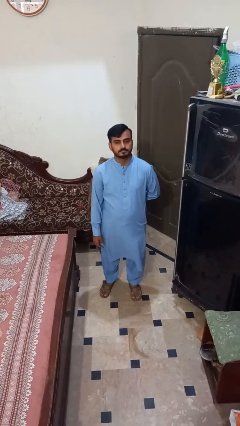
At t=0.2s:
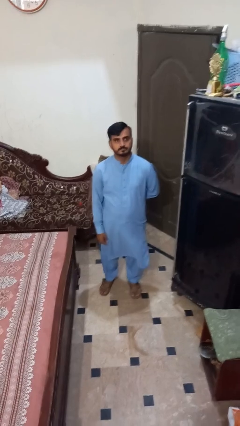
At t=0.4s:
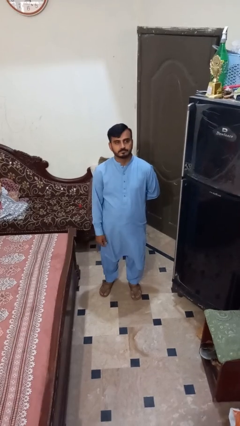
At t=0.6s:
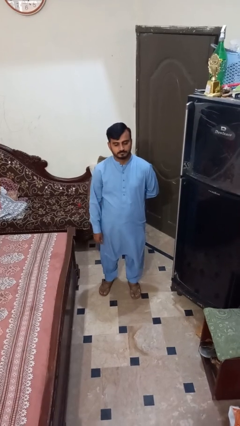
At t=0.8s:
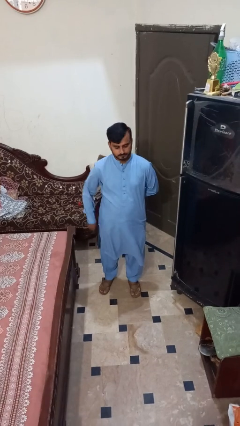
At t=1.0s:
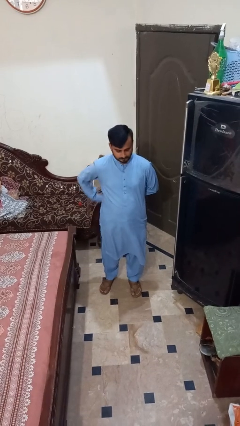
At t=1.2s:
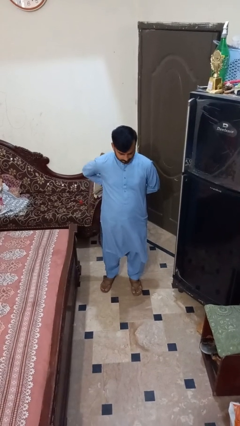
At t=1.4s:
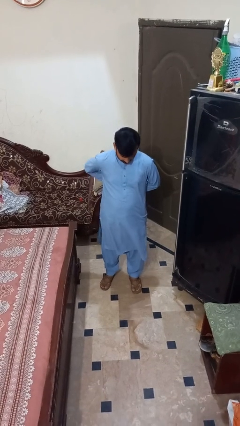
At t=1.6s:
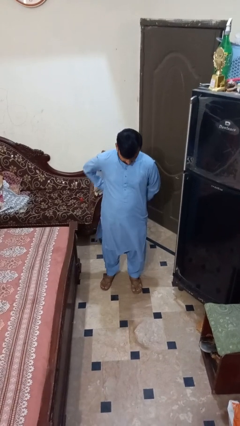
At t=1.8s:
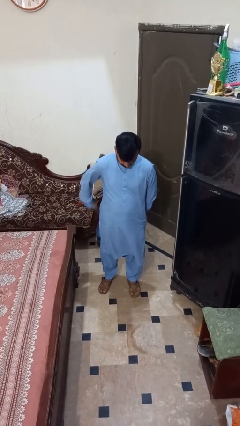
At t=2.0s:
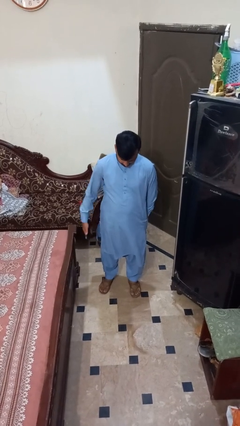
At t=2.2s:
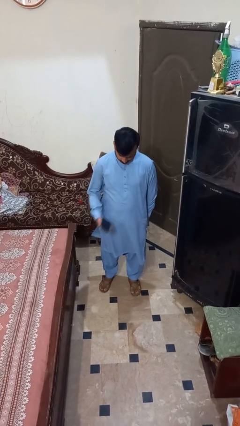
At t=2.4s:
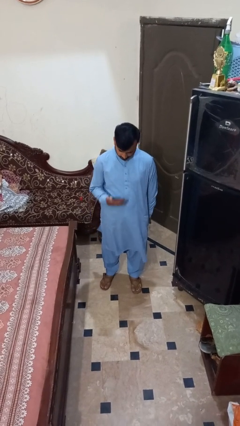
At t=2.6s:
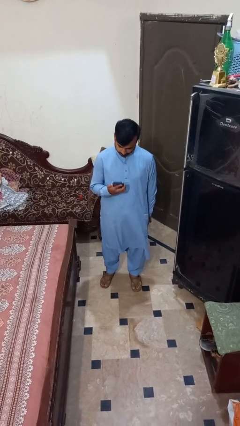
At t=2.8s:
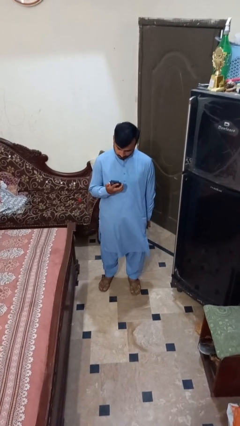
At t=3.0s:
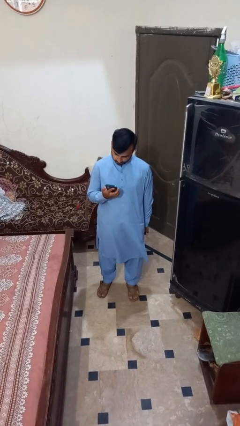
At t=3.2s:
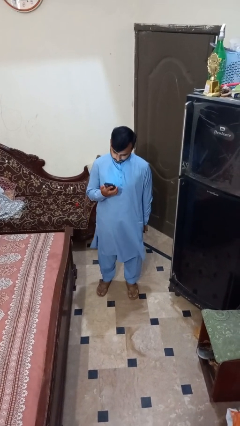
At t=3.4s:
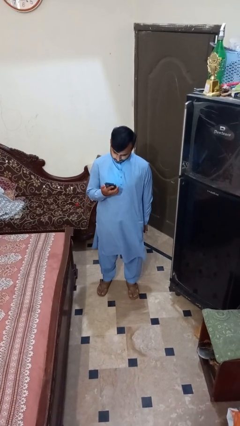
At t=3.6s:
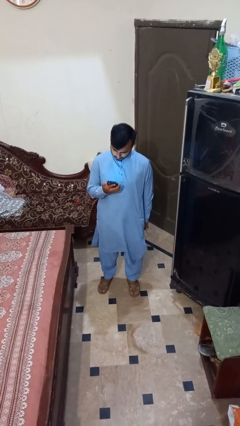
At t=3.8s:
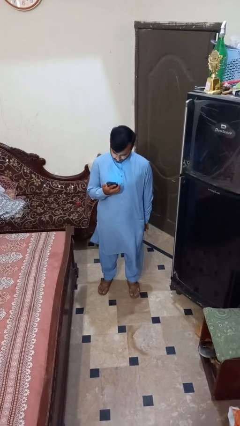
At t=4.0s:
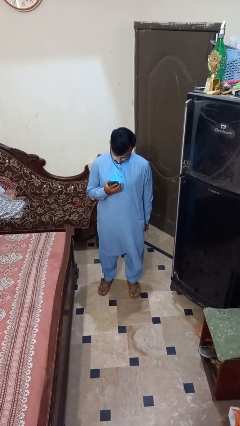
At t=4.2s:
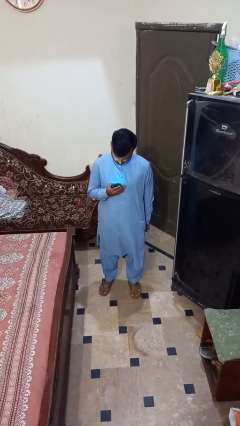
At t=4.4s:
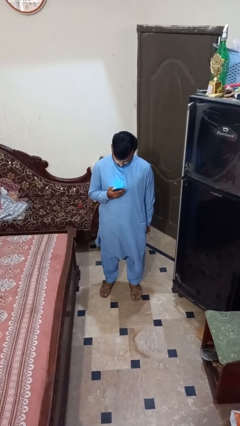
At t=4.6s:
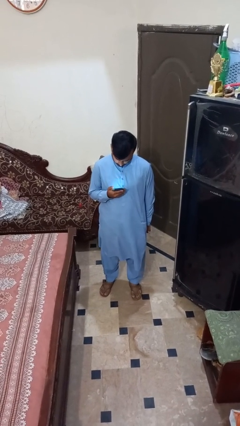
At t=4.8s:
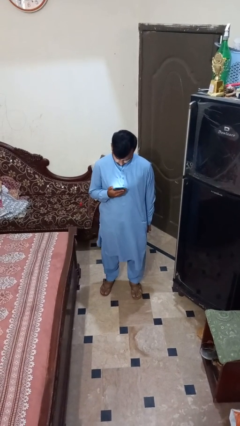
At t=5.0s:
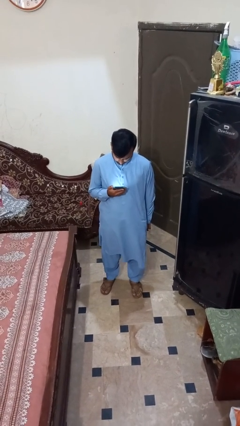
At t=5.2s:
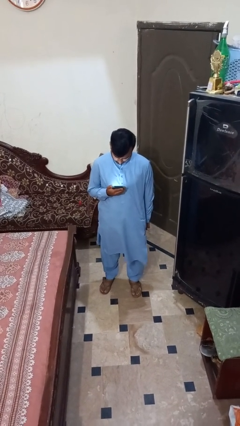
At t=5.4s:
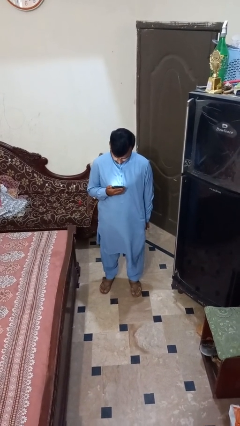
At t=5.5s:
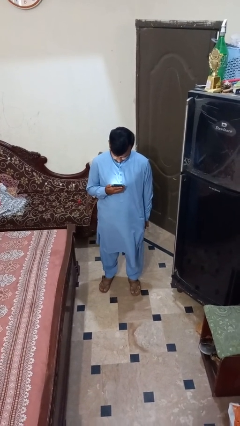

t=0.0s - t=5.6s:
person takes phone from pocket

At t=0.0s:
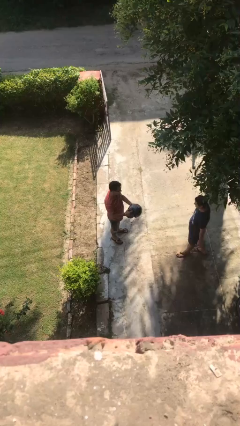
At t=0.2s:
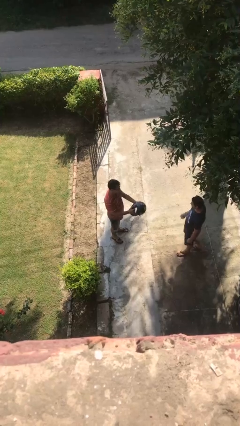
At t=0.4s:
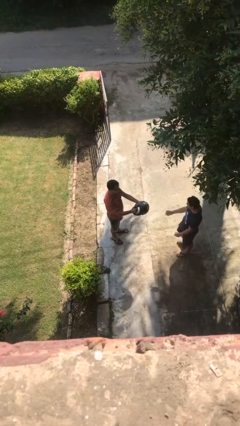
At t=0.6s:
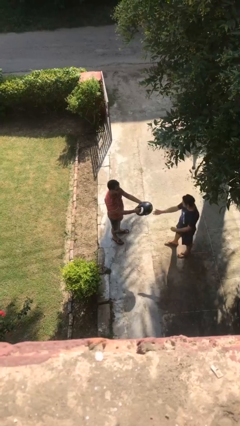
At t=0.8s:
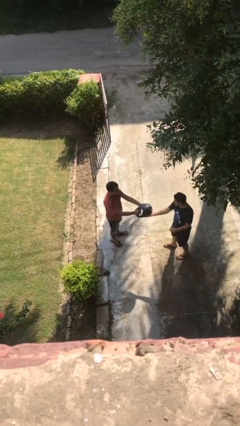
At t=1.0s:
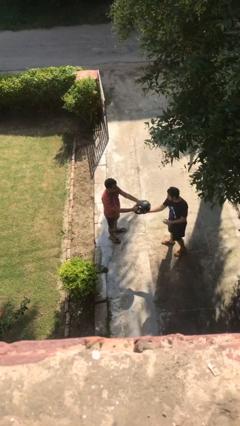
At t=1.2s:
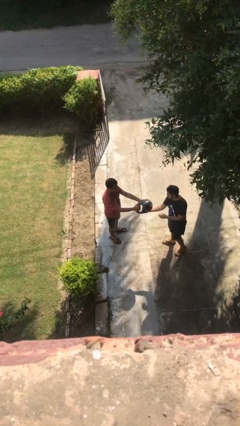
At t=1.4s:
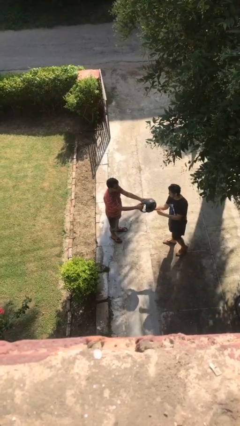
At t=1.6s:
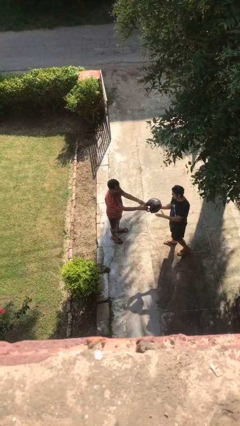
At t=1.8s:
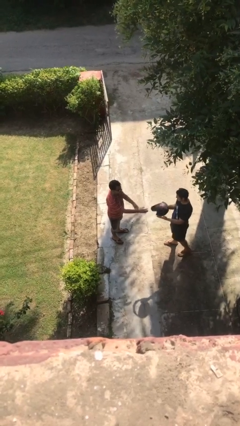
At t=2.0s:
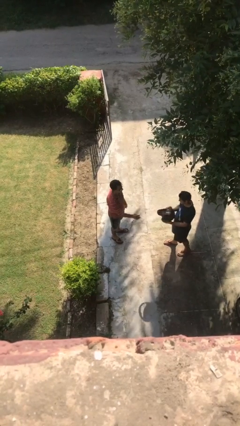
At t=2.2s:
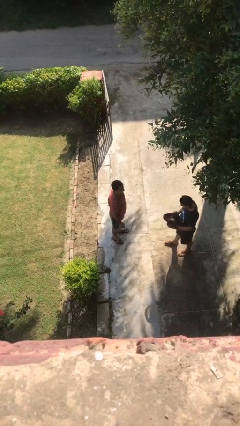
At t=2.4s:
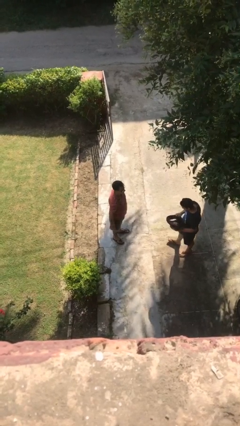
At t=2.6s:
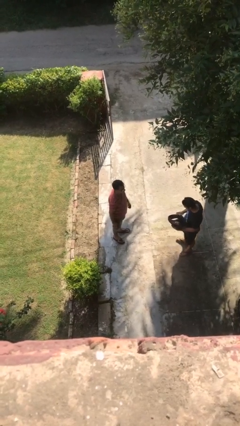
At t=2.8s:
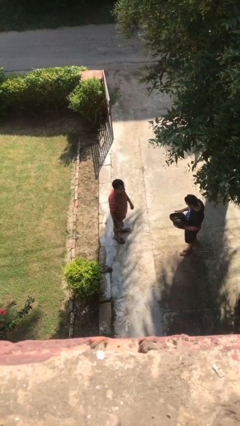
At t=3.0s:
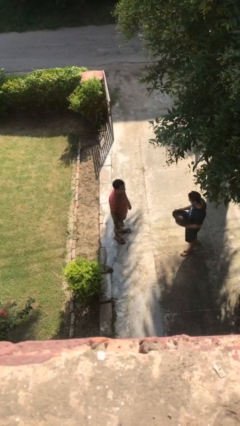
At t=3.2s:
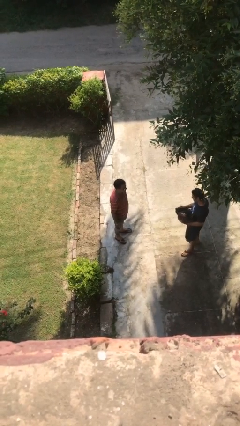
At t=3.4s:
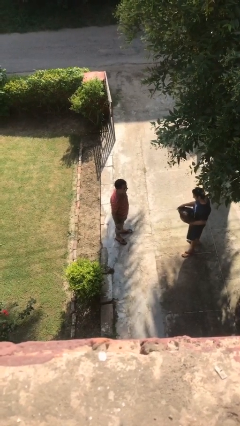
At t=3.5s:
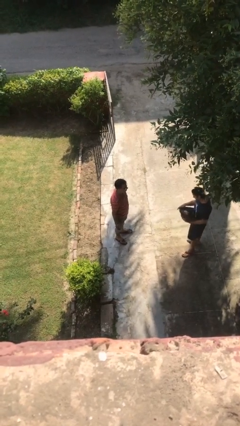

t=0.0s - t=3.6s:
person transfers object to person

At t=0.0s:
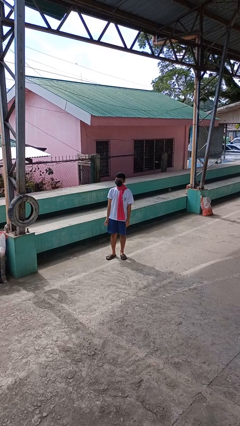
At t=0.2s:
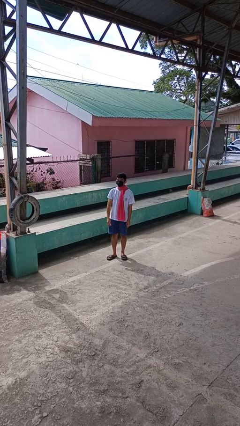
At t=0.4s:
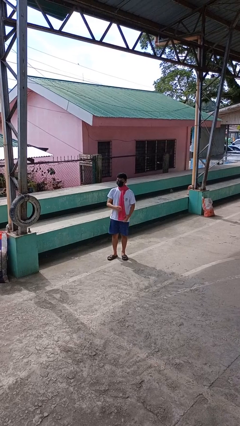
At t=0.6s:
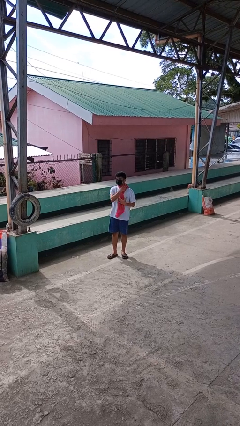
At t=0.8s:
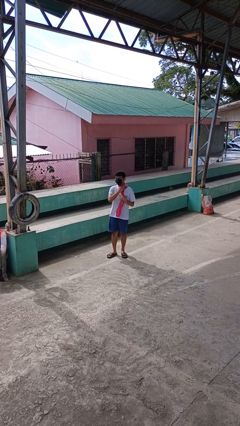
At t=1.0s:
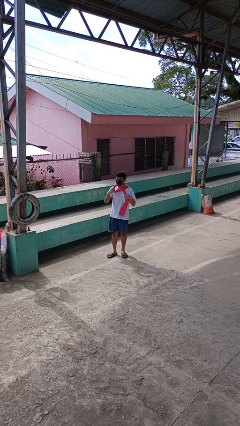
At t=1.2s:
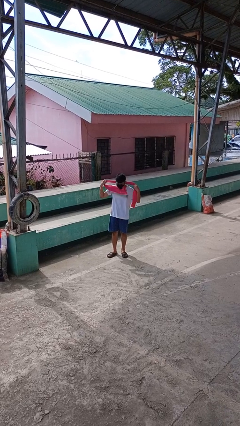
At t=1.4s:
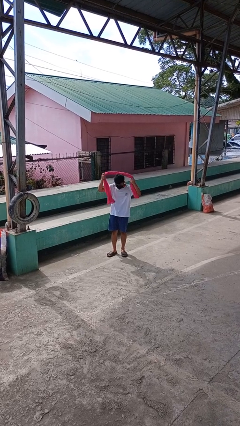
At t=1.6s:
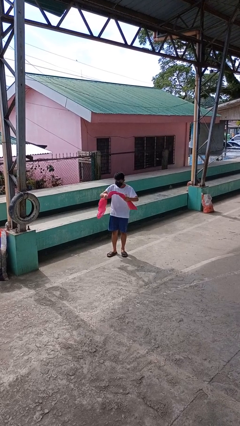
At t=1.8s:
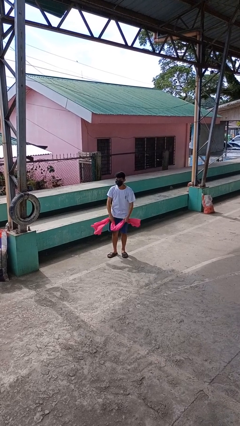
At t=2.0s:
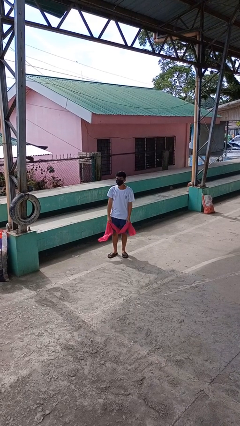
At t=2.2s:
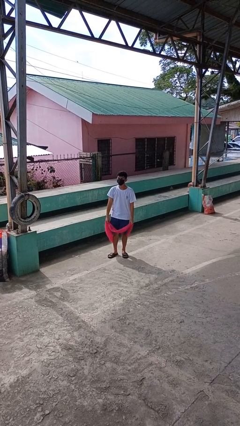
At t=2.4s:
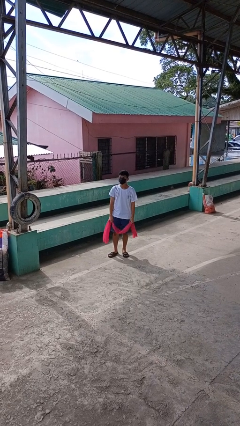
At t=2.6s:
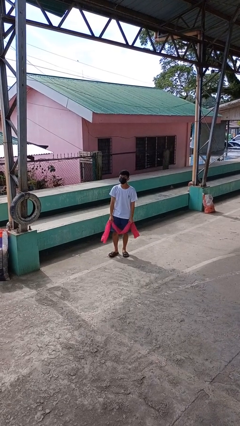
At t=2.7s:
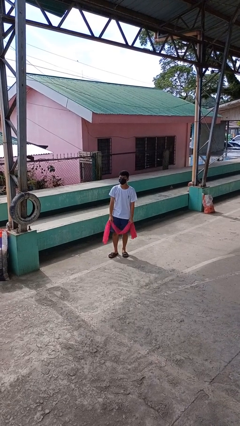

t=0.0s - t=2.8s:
person takes off scarf

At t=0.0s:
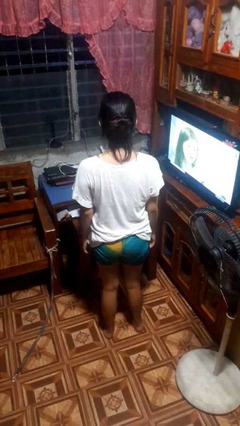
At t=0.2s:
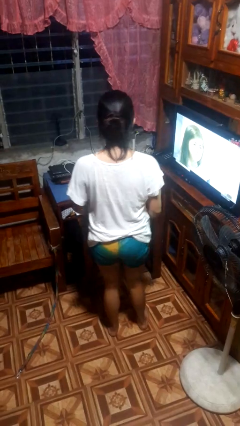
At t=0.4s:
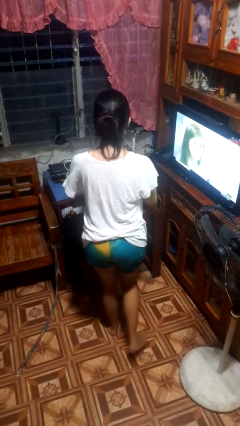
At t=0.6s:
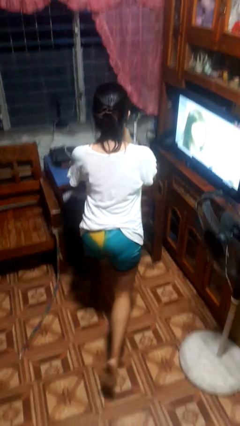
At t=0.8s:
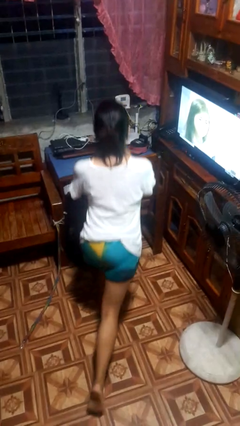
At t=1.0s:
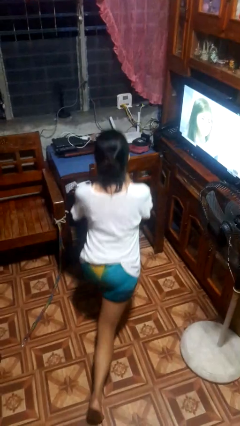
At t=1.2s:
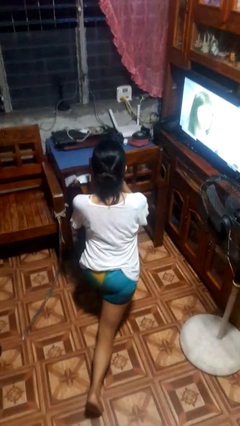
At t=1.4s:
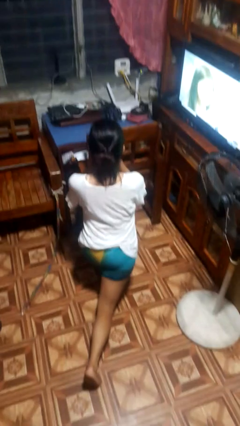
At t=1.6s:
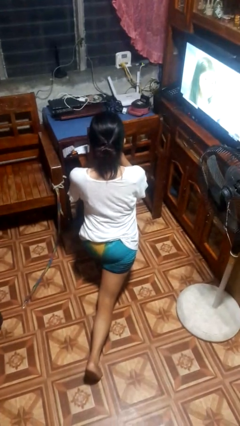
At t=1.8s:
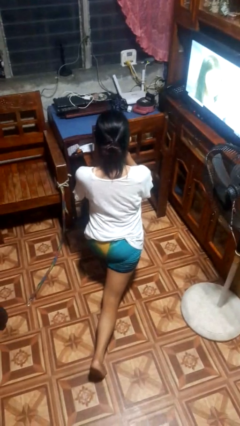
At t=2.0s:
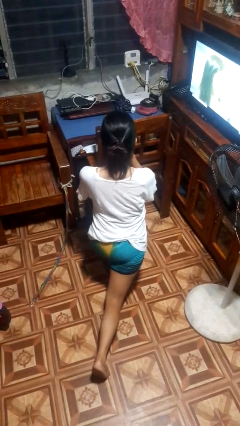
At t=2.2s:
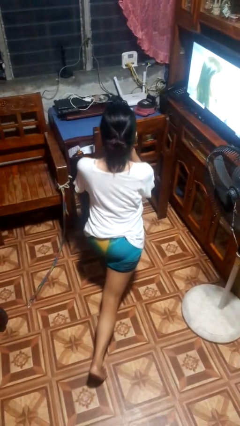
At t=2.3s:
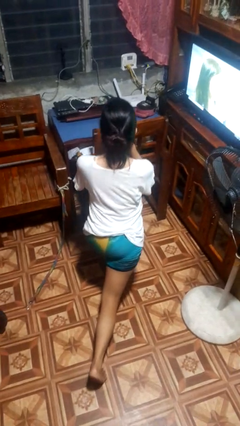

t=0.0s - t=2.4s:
person exercises with lunges

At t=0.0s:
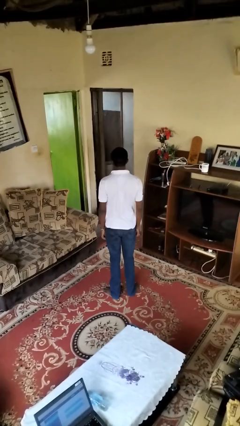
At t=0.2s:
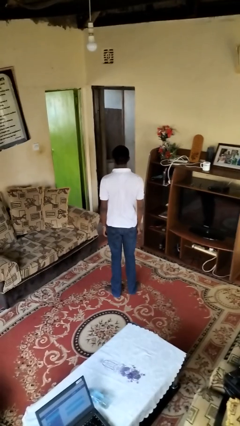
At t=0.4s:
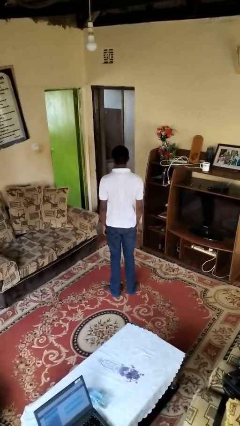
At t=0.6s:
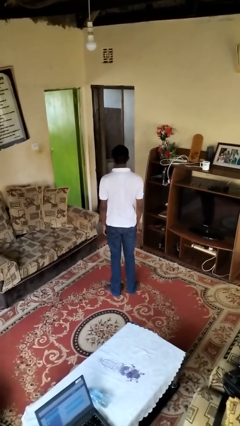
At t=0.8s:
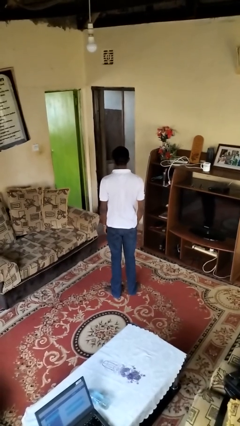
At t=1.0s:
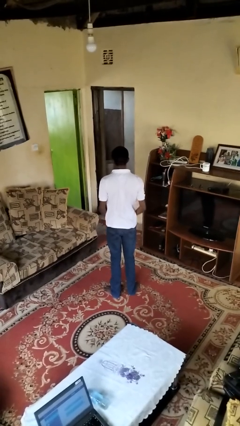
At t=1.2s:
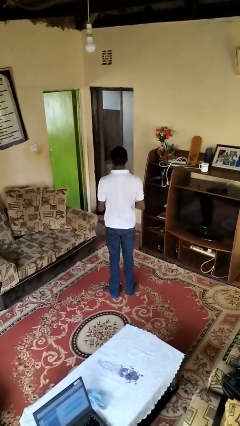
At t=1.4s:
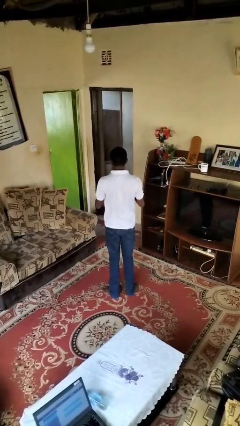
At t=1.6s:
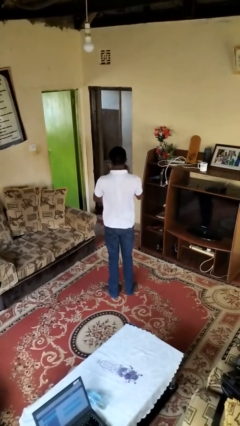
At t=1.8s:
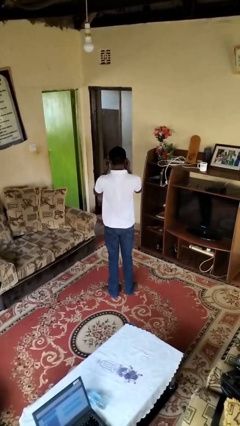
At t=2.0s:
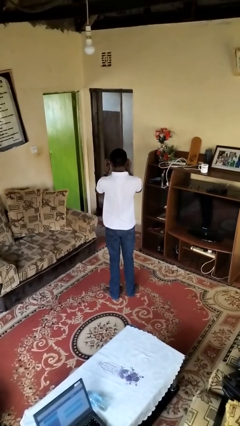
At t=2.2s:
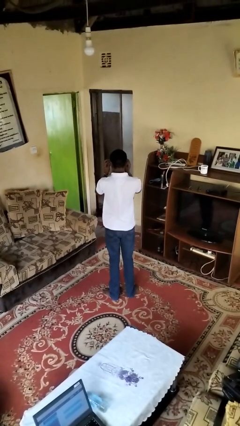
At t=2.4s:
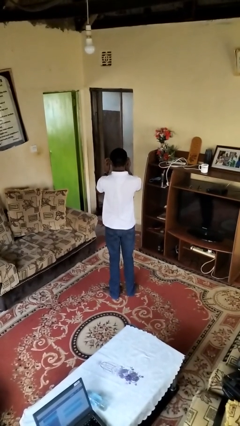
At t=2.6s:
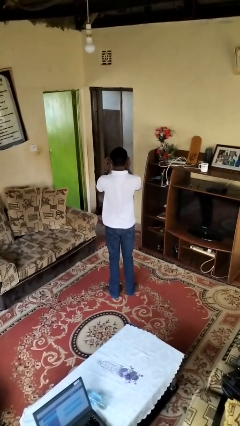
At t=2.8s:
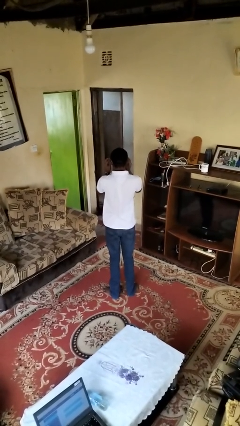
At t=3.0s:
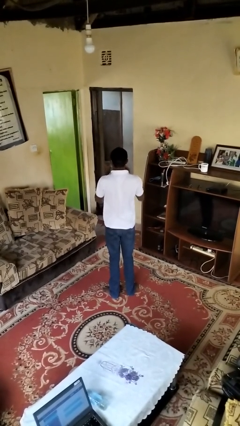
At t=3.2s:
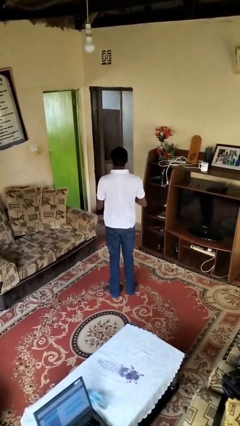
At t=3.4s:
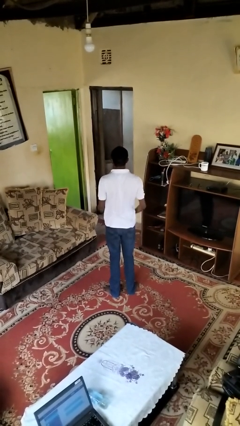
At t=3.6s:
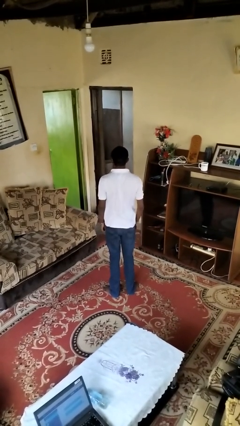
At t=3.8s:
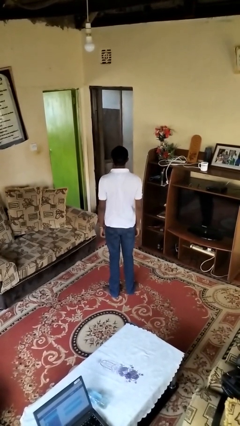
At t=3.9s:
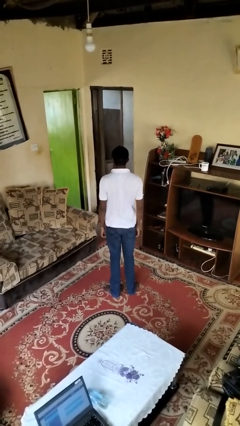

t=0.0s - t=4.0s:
person puts on sunglasses
